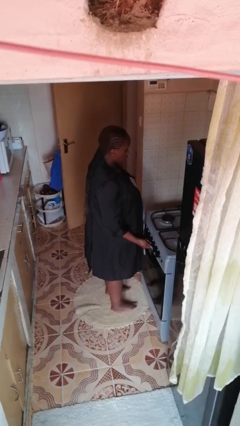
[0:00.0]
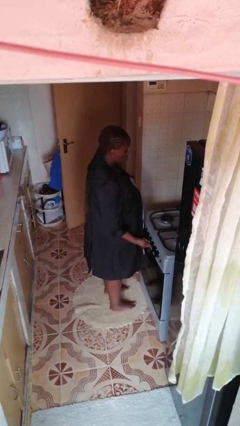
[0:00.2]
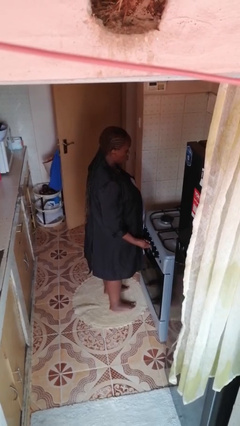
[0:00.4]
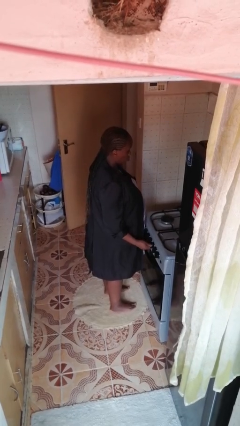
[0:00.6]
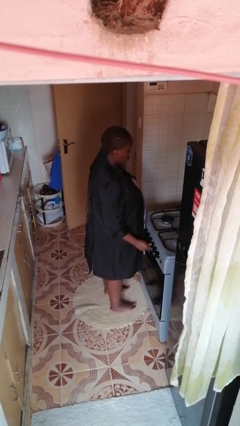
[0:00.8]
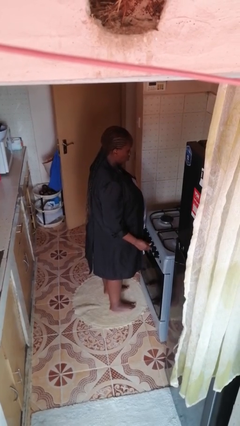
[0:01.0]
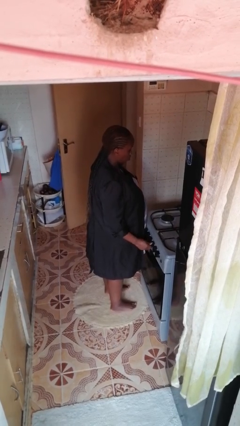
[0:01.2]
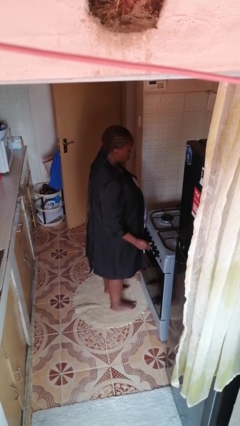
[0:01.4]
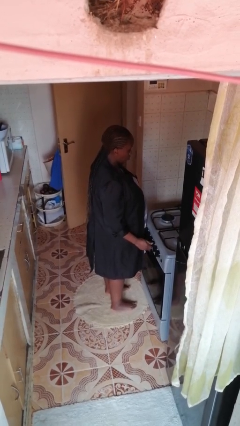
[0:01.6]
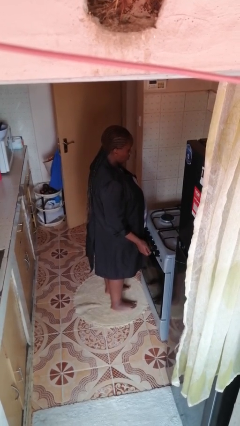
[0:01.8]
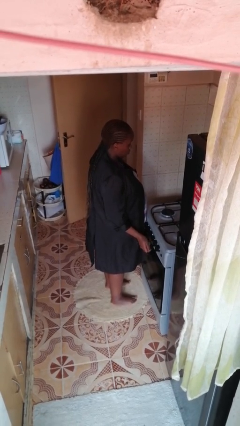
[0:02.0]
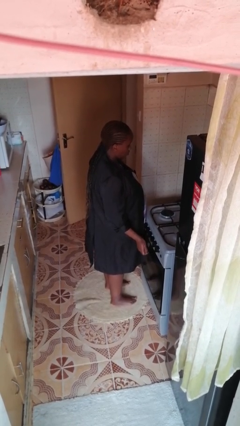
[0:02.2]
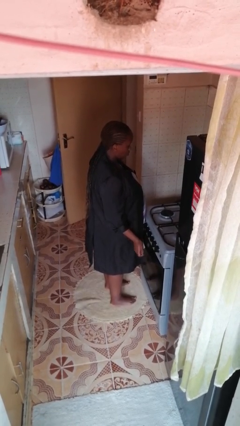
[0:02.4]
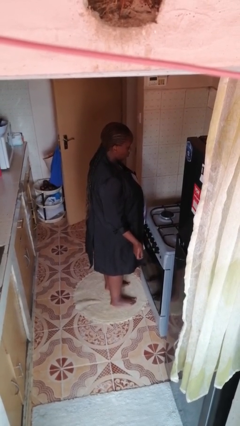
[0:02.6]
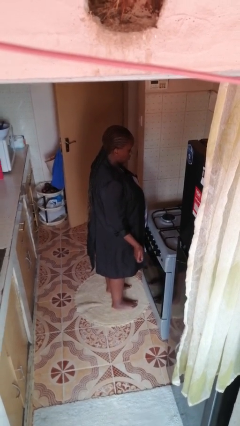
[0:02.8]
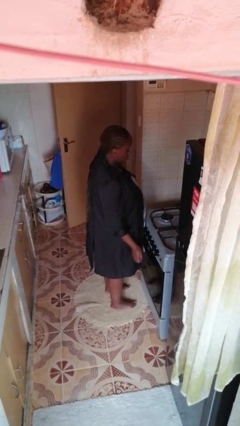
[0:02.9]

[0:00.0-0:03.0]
person turns on stovetop

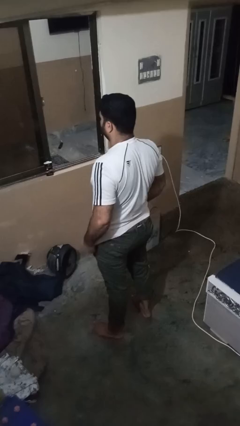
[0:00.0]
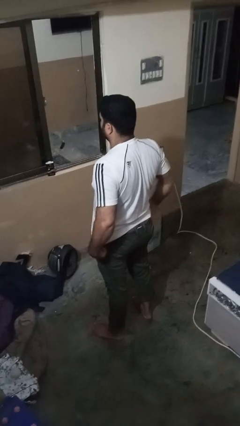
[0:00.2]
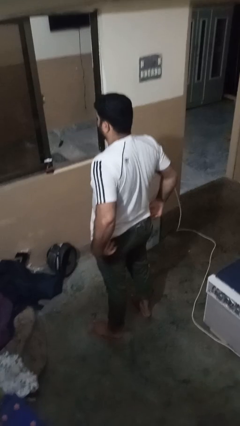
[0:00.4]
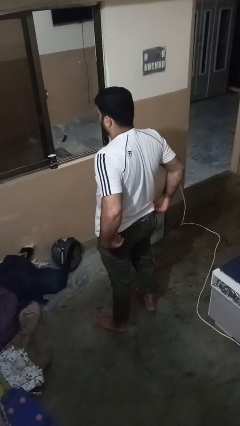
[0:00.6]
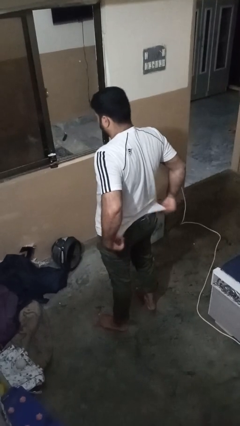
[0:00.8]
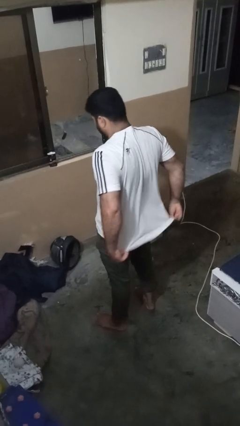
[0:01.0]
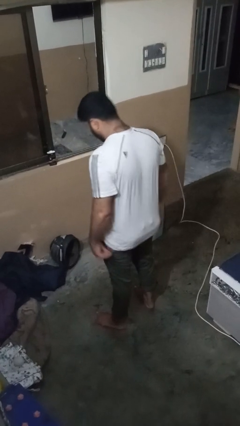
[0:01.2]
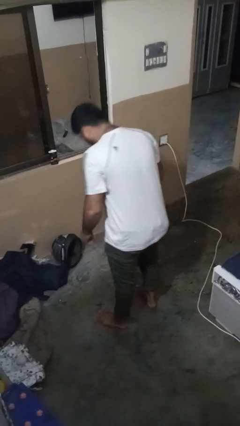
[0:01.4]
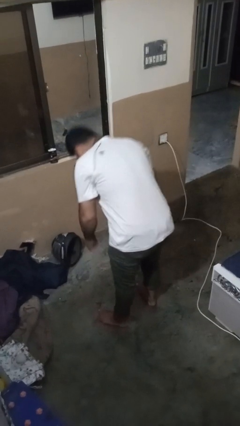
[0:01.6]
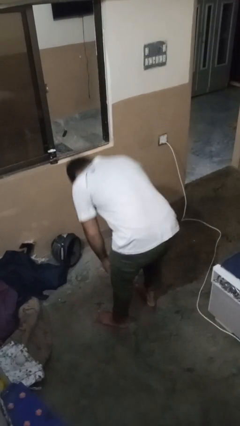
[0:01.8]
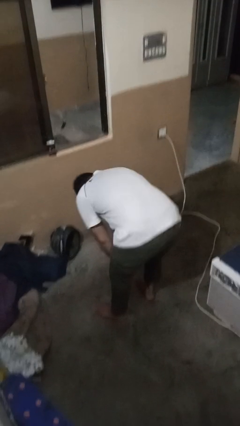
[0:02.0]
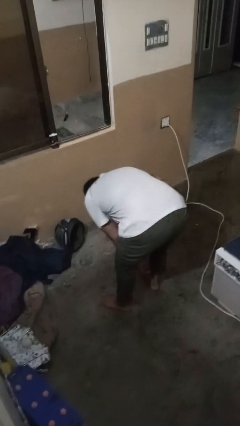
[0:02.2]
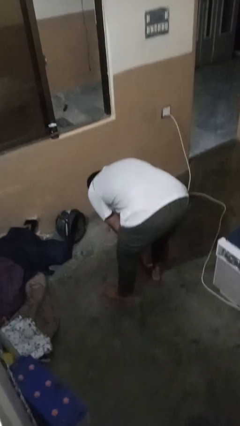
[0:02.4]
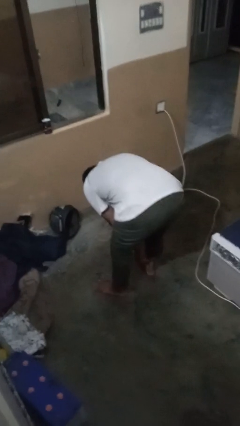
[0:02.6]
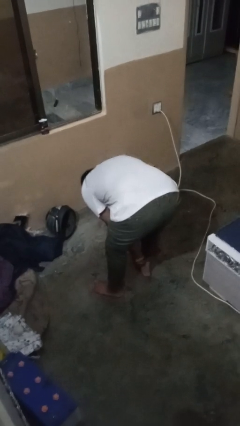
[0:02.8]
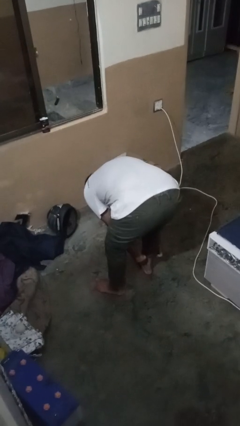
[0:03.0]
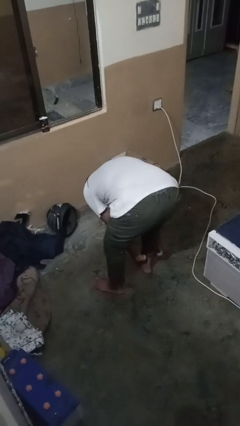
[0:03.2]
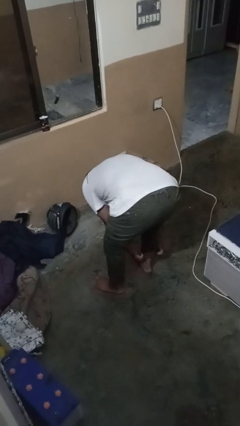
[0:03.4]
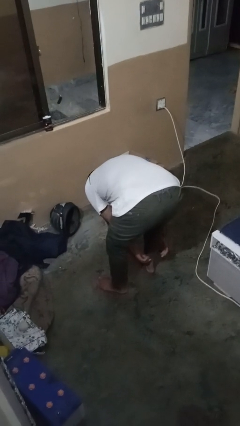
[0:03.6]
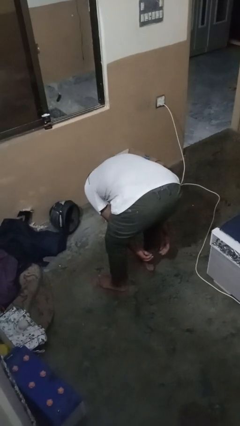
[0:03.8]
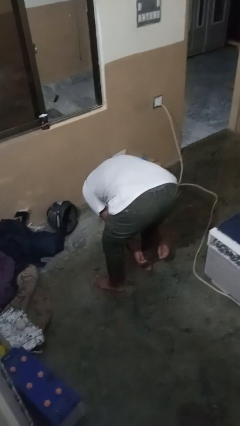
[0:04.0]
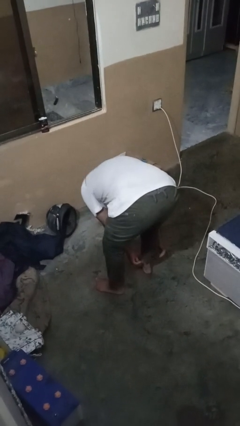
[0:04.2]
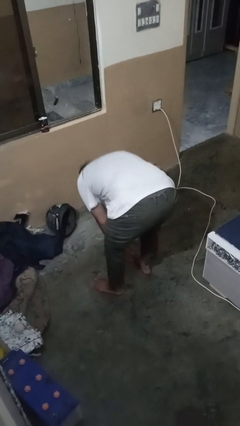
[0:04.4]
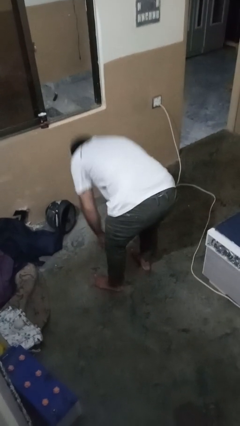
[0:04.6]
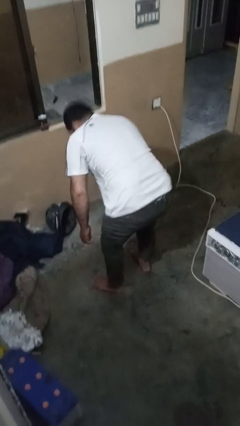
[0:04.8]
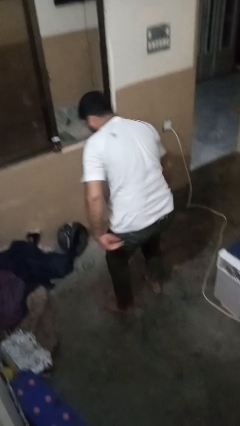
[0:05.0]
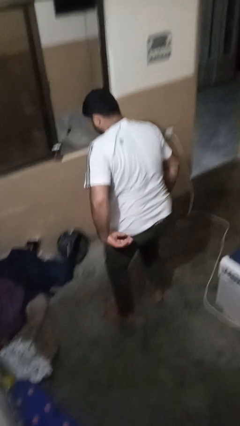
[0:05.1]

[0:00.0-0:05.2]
person hikes up pants

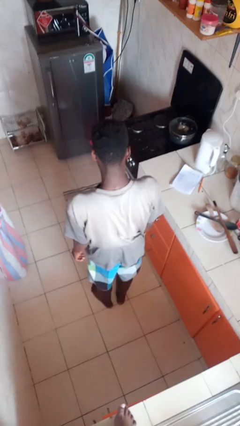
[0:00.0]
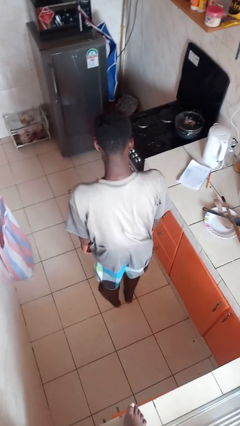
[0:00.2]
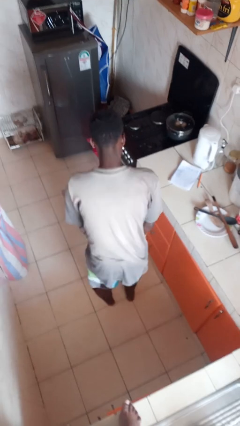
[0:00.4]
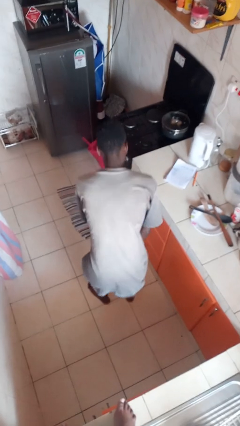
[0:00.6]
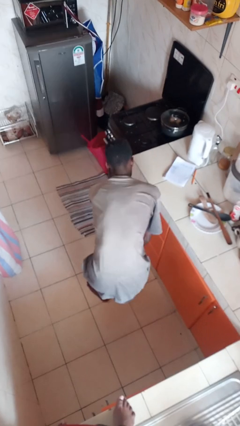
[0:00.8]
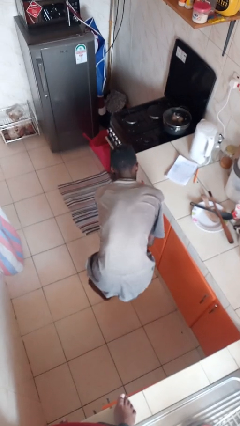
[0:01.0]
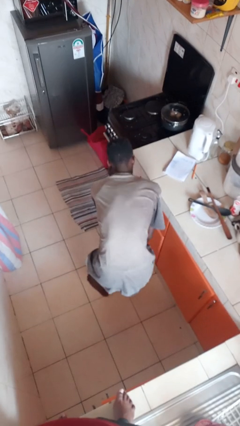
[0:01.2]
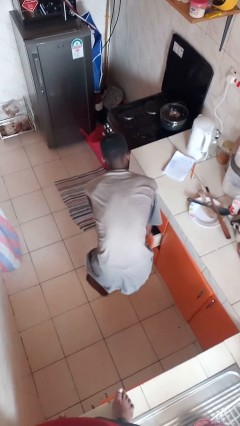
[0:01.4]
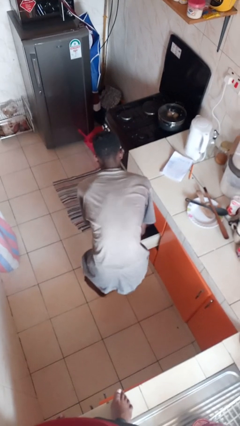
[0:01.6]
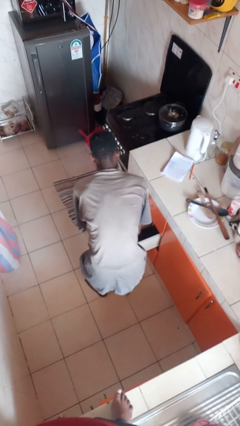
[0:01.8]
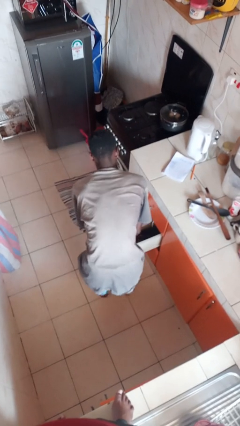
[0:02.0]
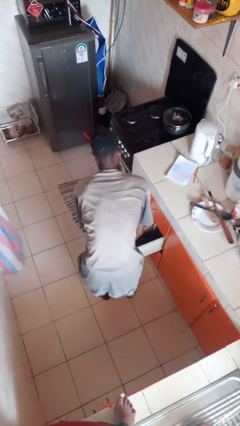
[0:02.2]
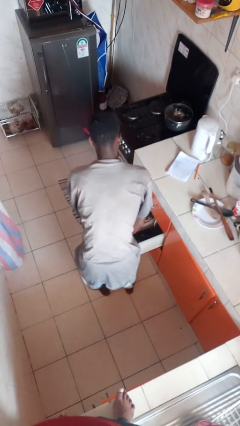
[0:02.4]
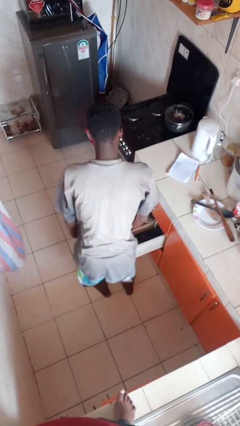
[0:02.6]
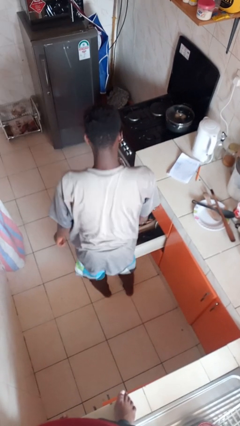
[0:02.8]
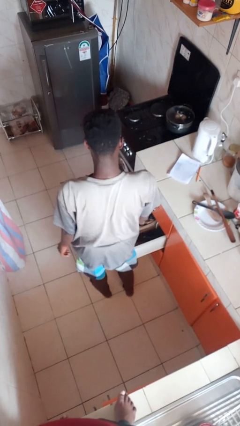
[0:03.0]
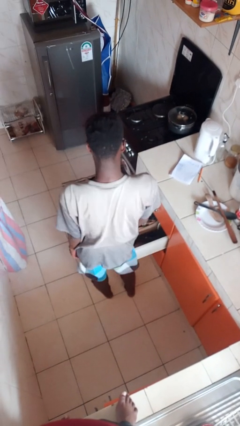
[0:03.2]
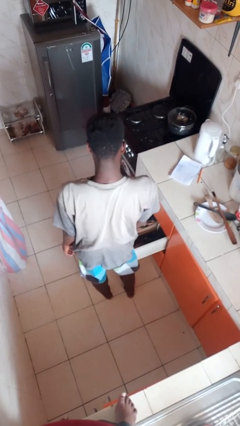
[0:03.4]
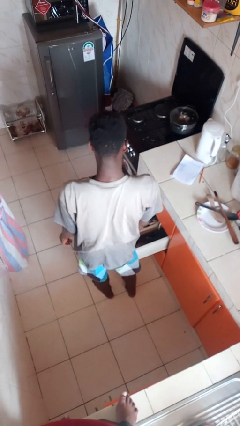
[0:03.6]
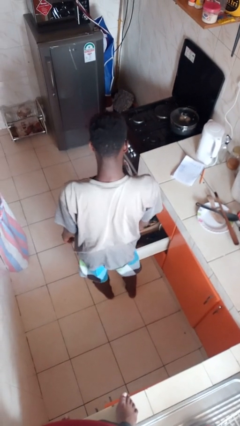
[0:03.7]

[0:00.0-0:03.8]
person opens clothes washer

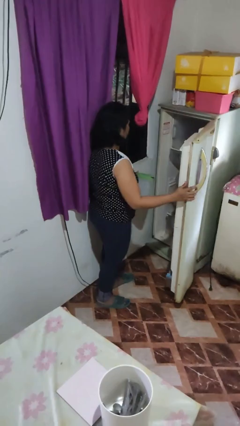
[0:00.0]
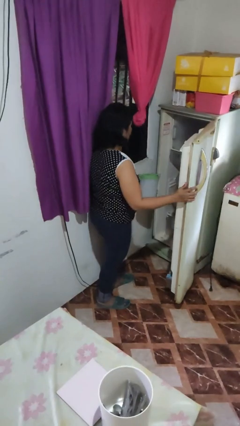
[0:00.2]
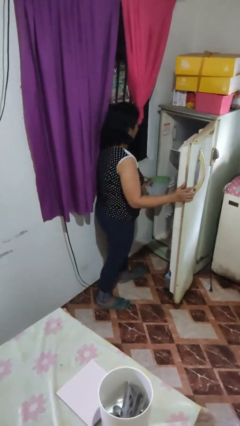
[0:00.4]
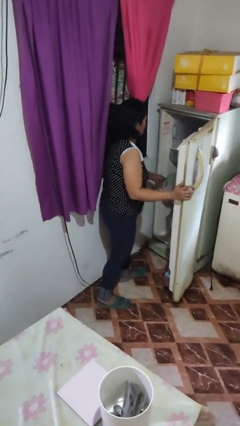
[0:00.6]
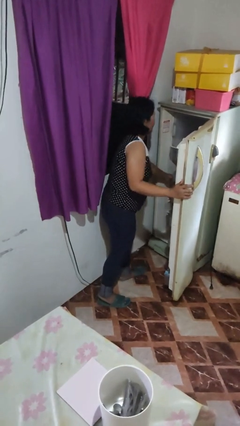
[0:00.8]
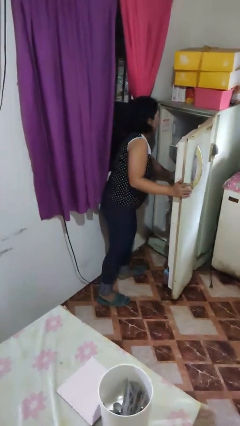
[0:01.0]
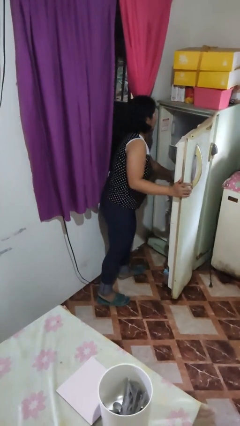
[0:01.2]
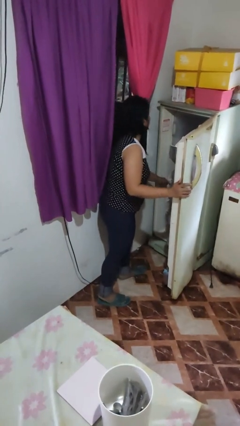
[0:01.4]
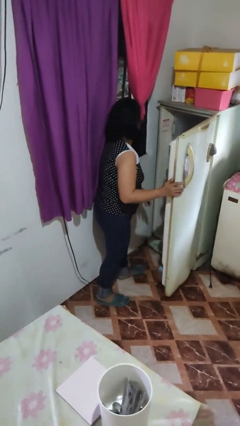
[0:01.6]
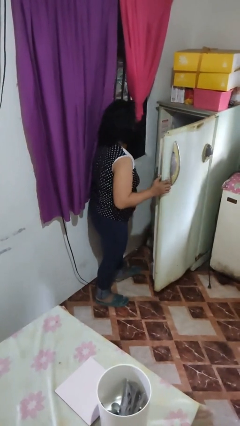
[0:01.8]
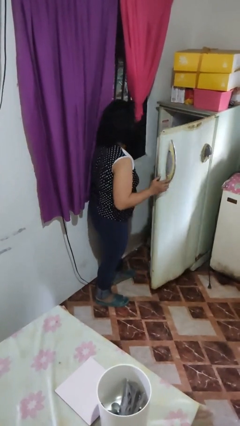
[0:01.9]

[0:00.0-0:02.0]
person puts object into refrigerator

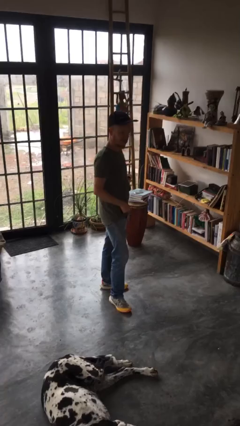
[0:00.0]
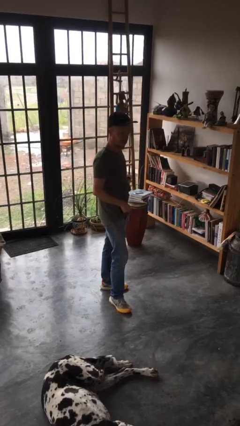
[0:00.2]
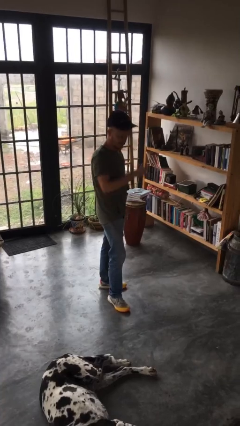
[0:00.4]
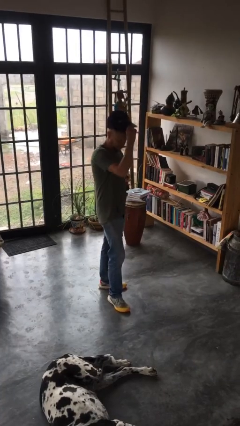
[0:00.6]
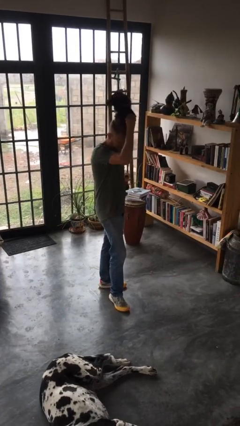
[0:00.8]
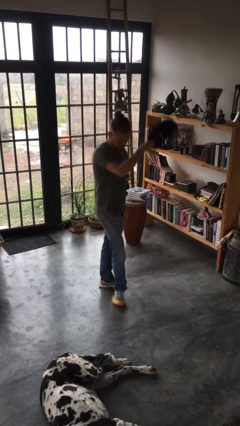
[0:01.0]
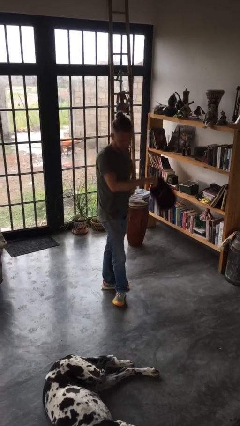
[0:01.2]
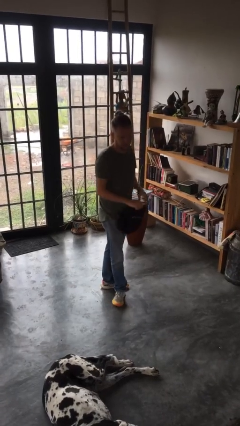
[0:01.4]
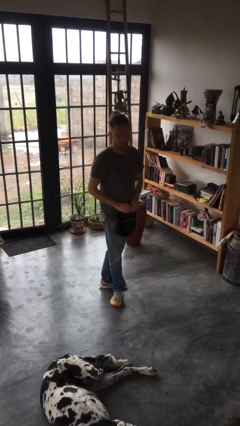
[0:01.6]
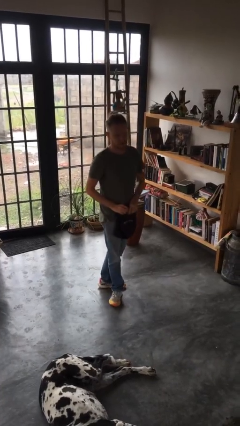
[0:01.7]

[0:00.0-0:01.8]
person takes off hat

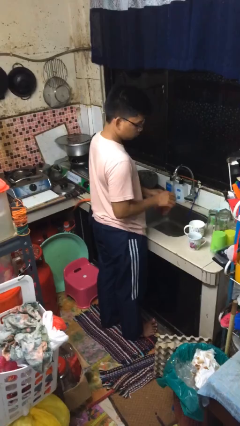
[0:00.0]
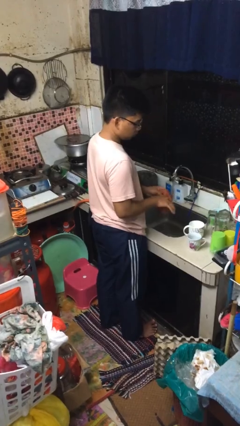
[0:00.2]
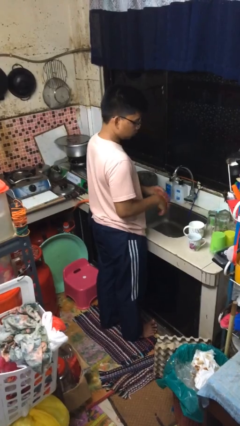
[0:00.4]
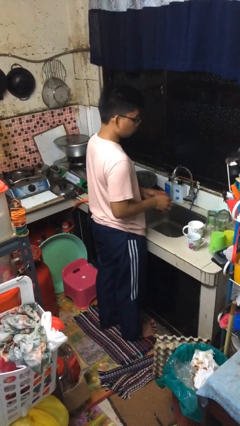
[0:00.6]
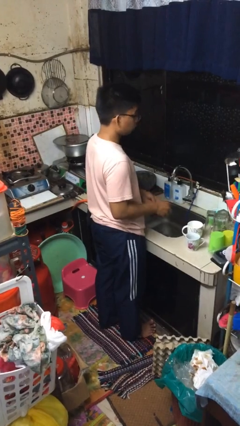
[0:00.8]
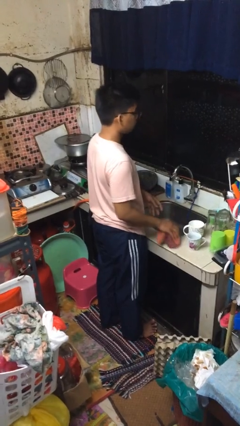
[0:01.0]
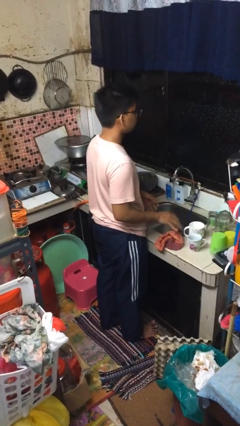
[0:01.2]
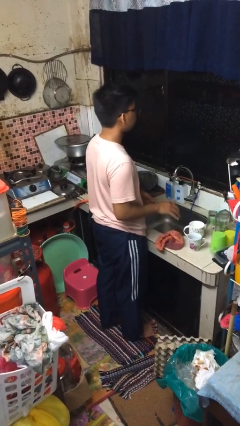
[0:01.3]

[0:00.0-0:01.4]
person dries hands with towel
